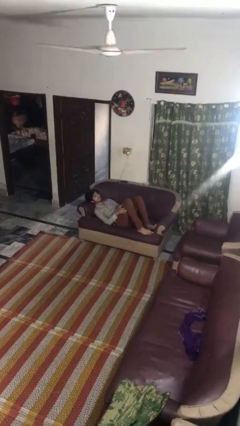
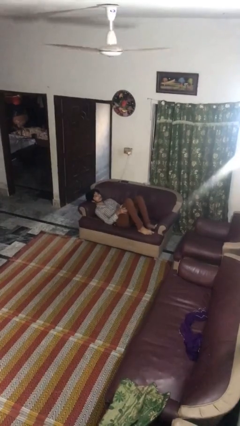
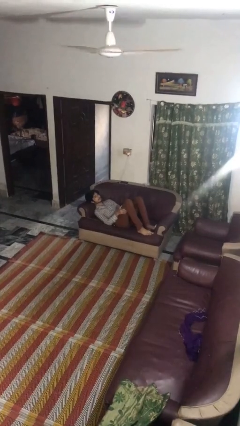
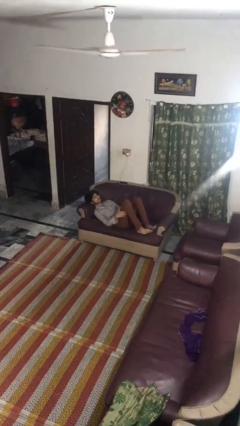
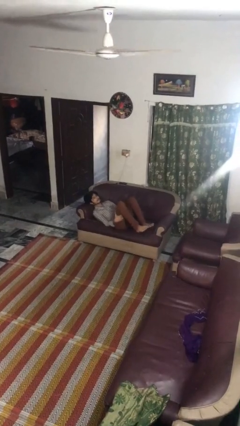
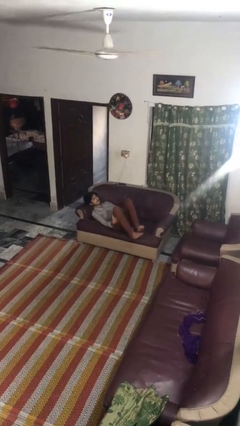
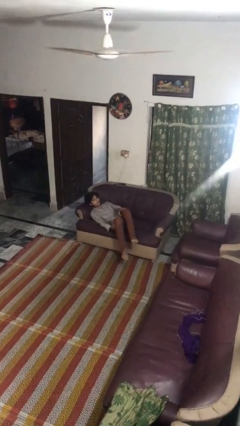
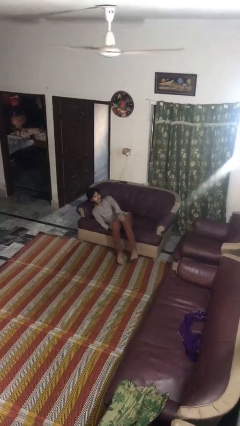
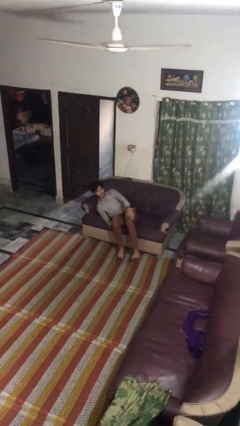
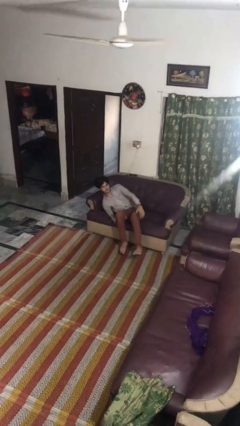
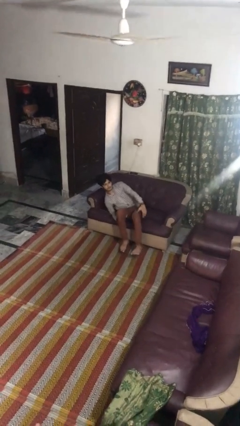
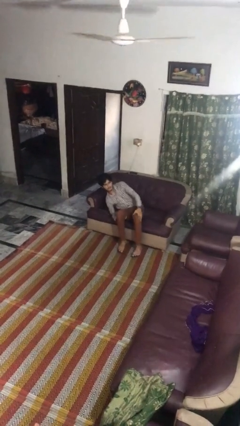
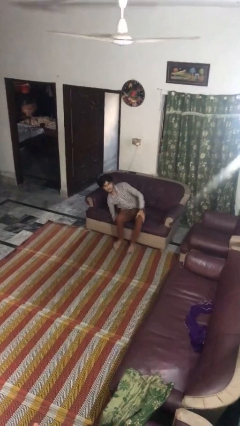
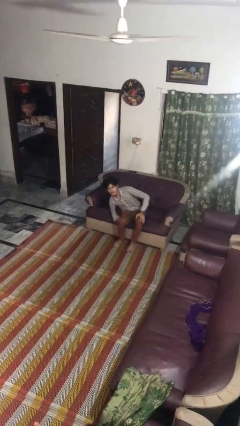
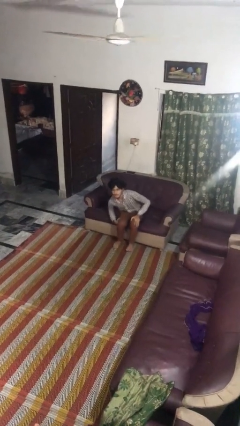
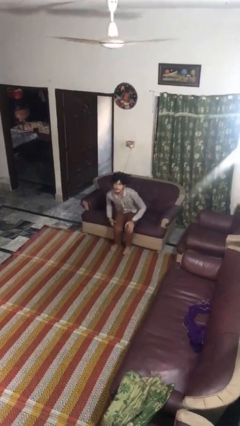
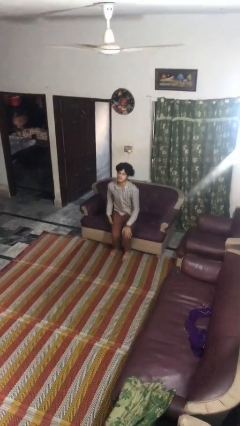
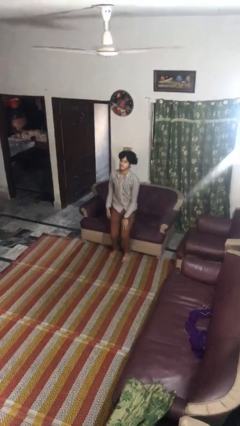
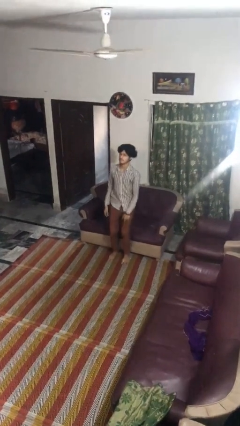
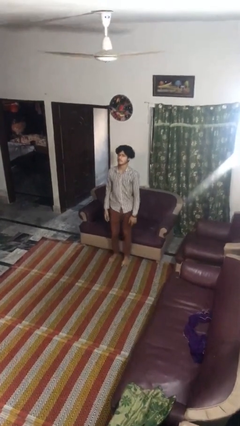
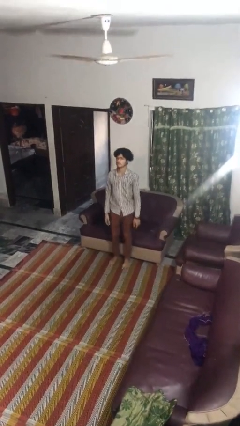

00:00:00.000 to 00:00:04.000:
person stands up

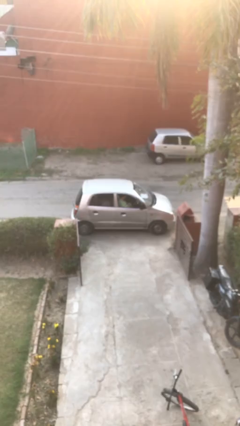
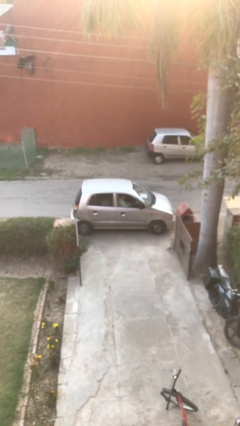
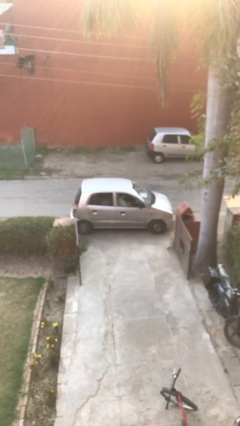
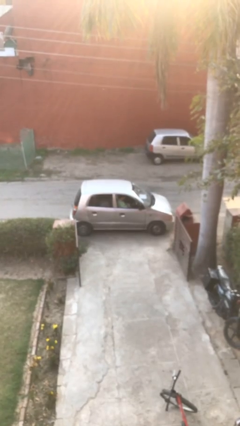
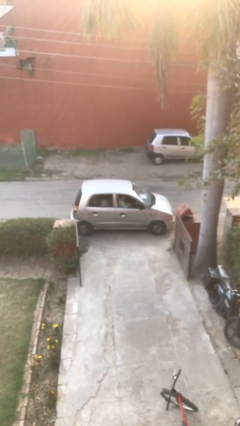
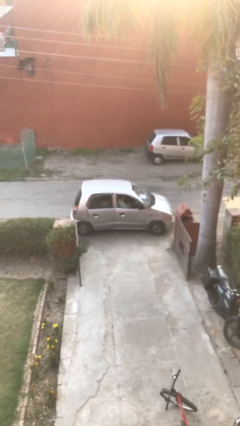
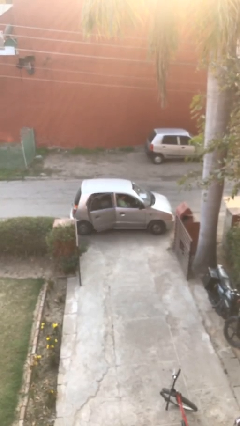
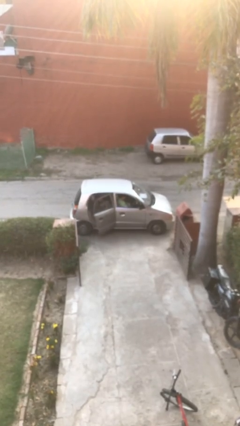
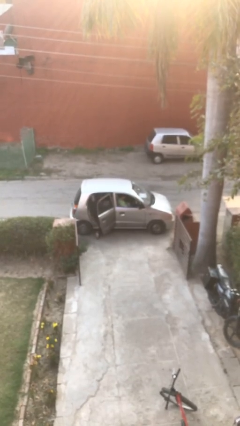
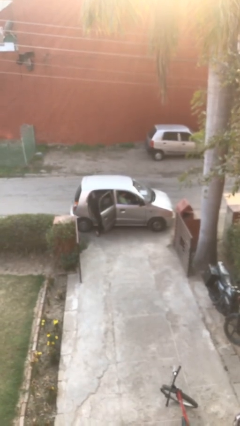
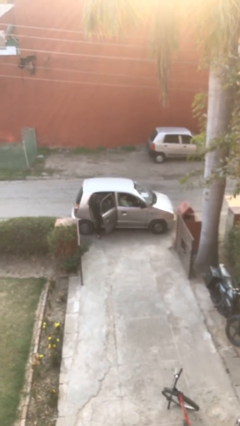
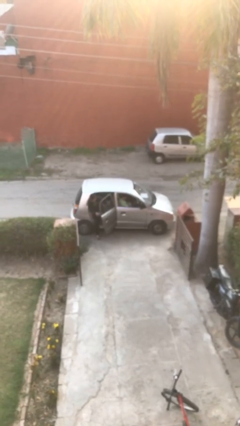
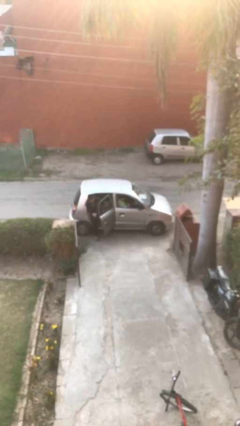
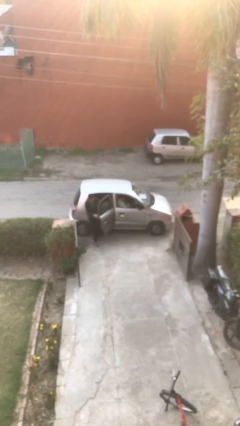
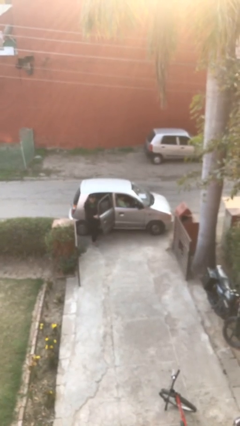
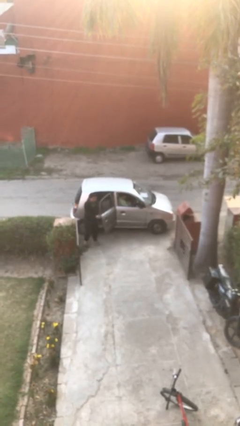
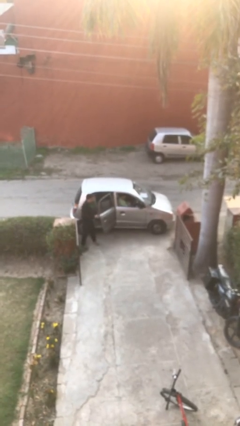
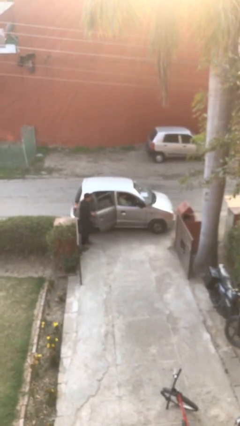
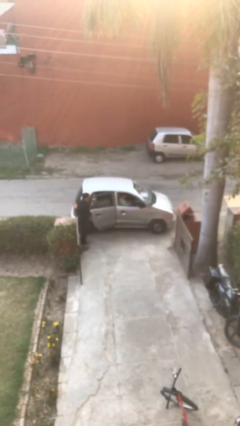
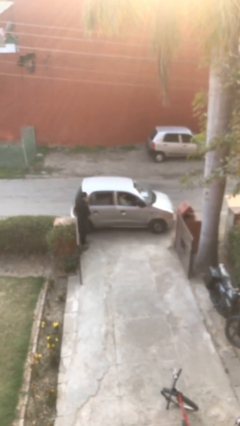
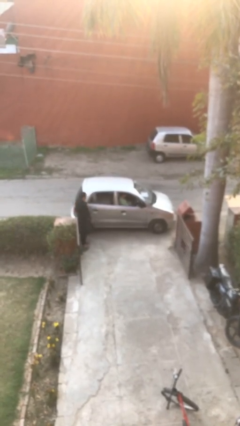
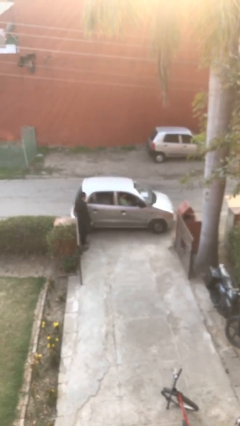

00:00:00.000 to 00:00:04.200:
car drops off person

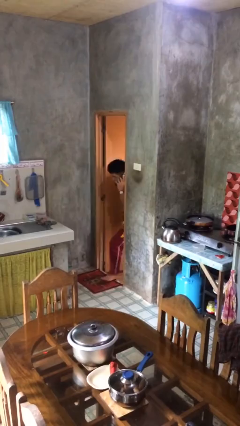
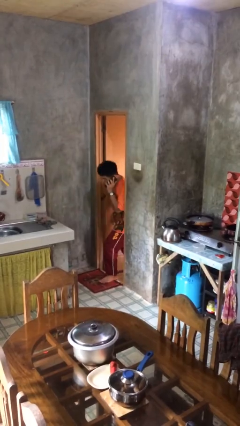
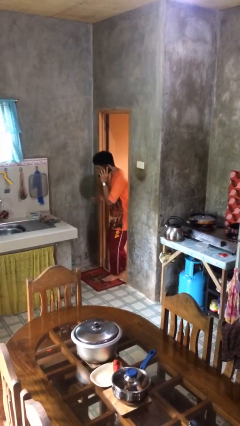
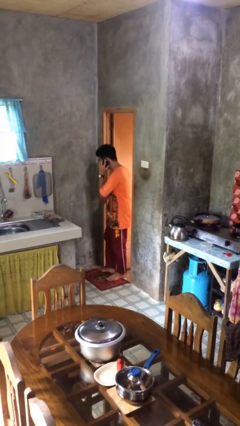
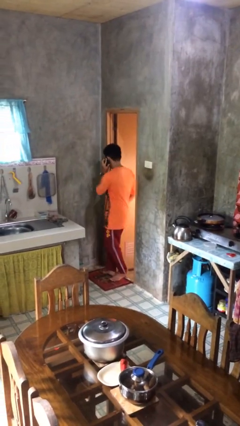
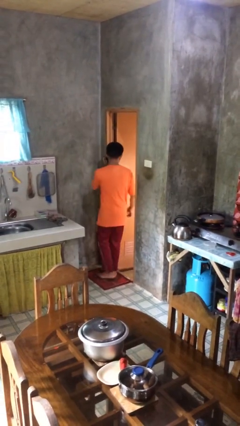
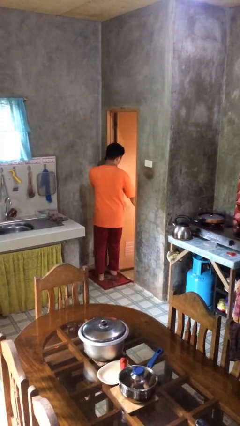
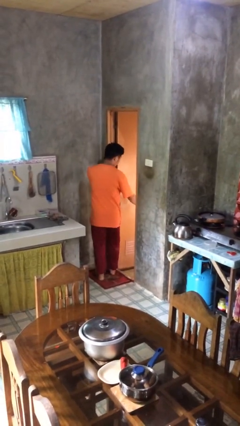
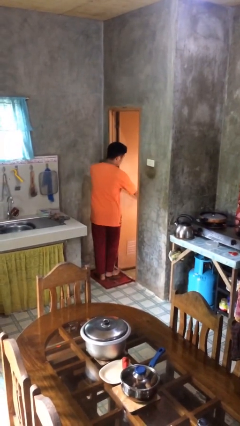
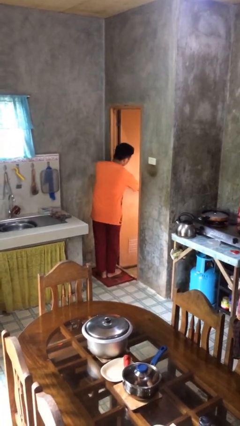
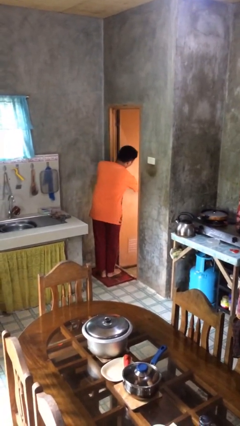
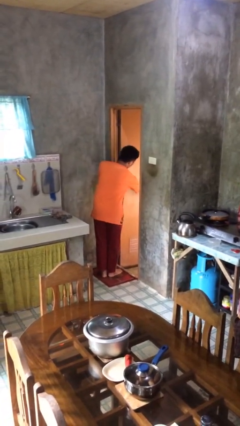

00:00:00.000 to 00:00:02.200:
person enters scene through structure

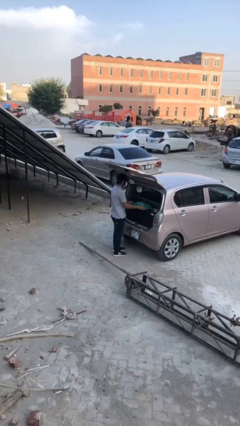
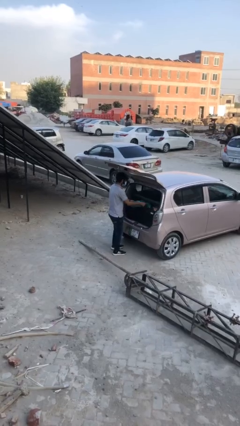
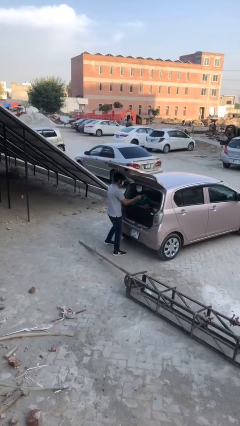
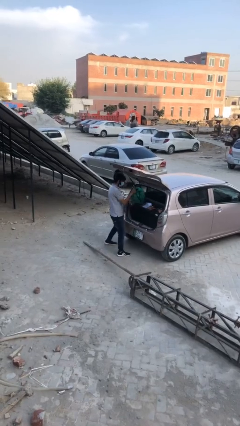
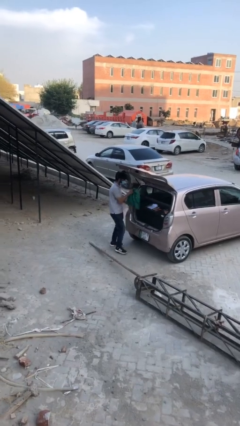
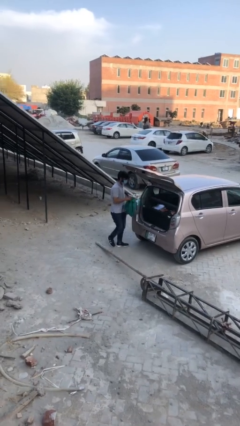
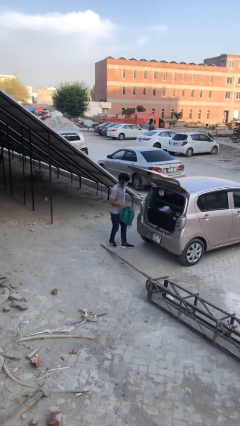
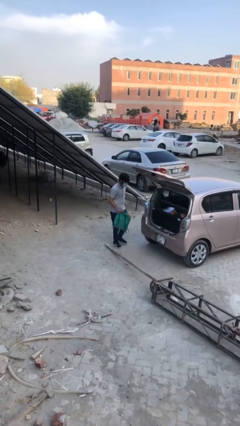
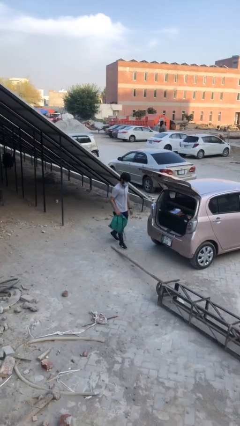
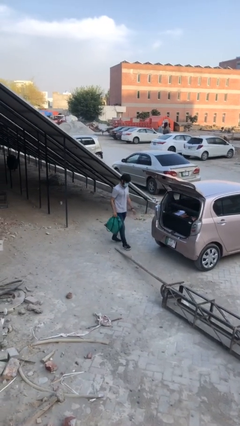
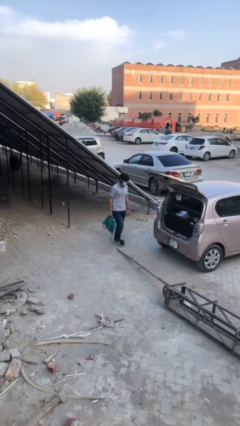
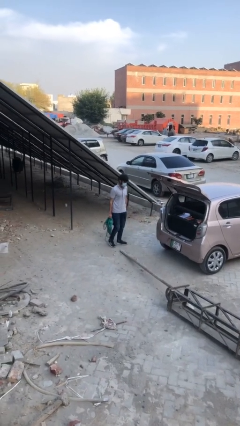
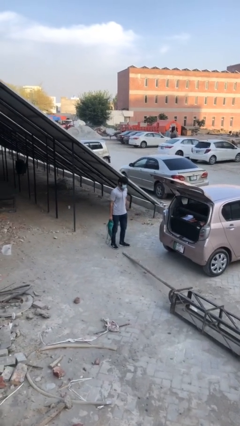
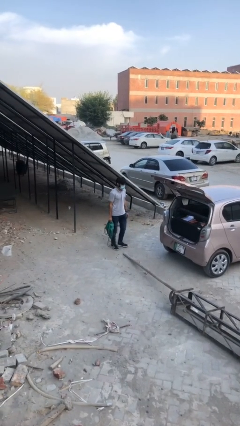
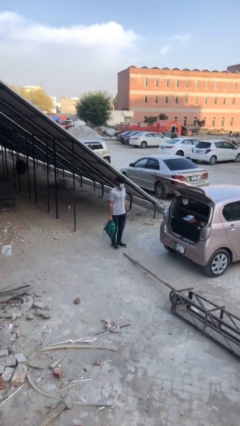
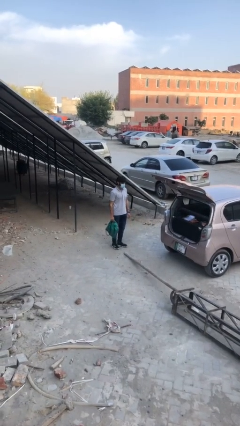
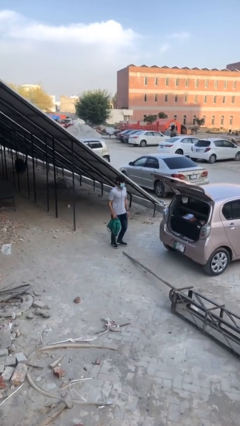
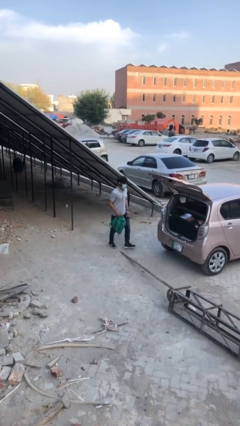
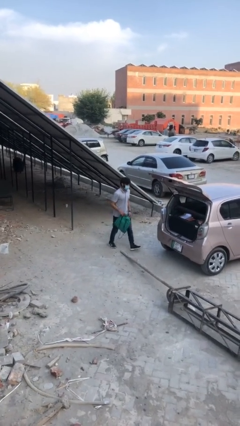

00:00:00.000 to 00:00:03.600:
person unloads car

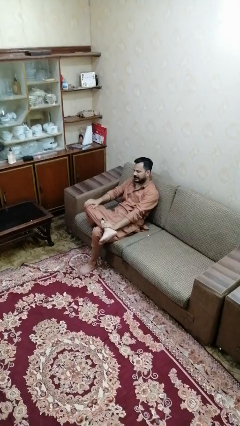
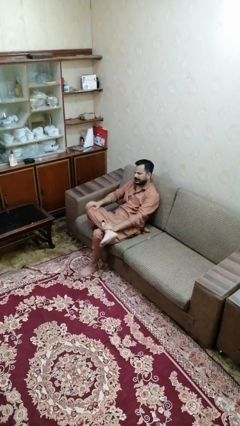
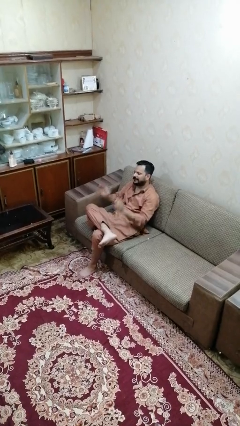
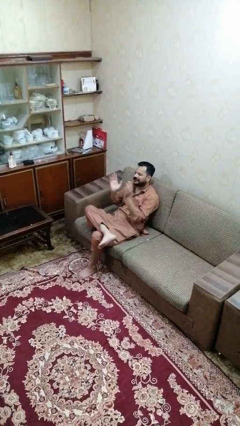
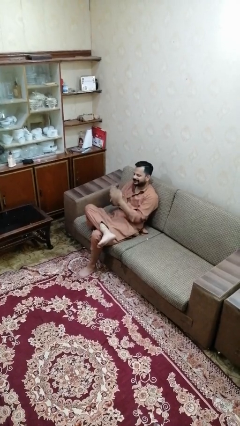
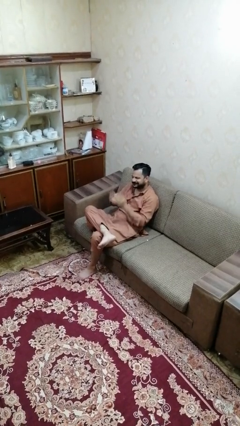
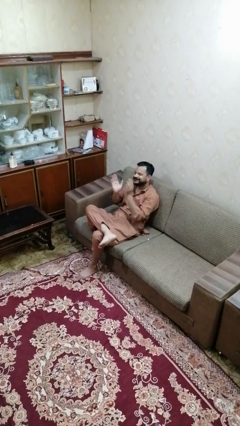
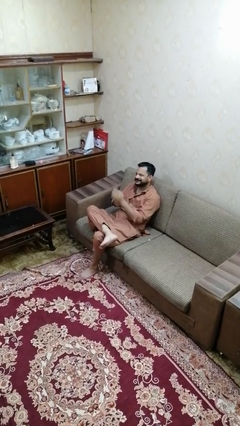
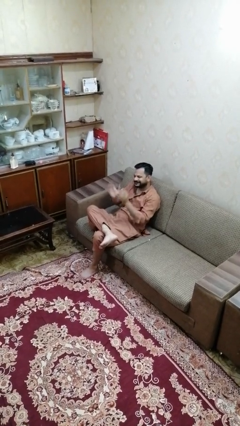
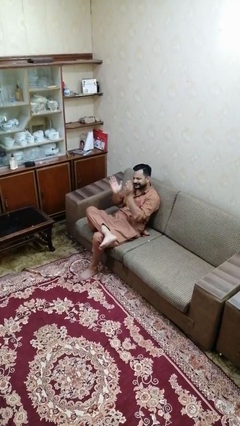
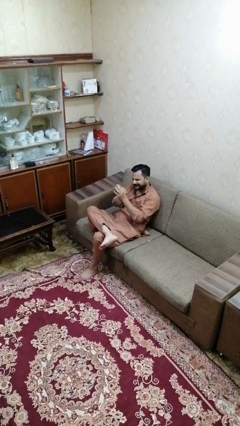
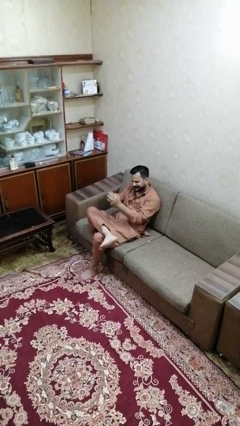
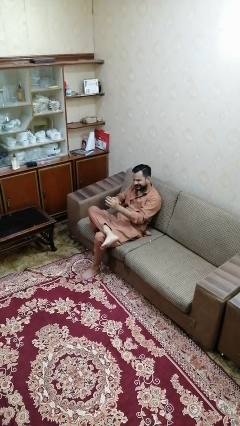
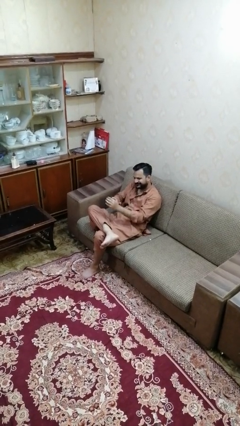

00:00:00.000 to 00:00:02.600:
person claps hands

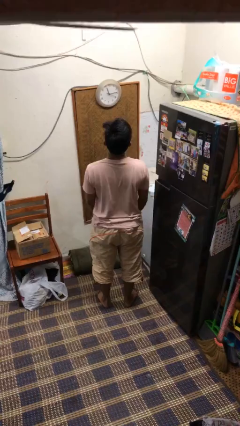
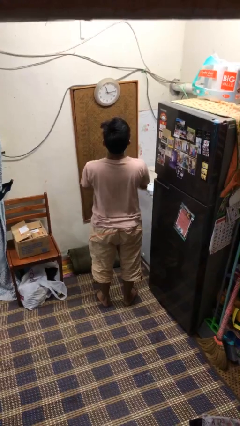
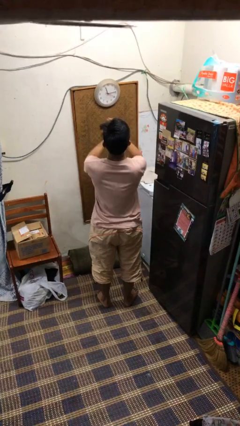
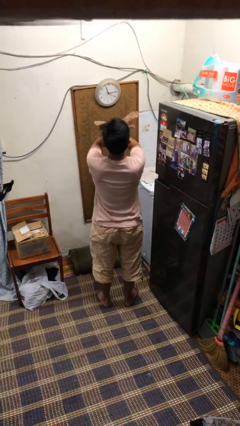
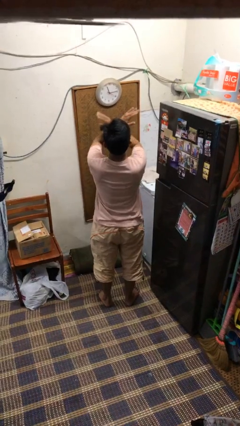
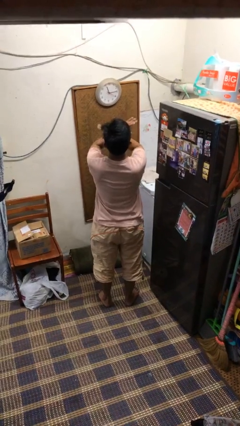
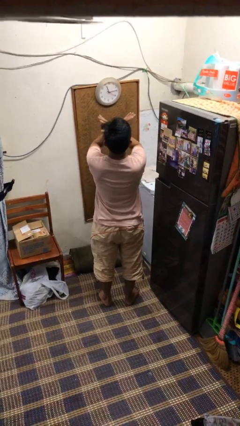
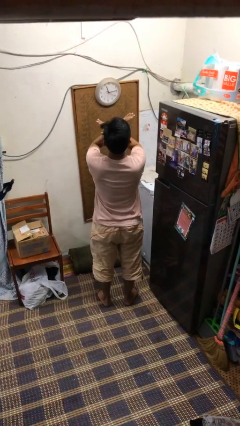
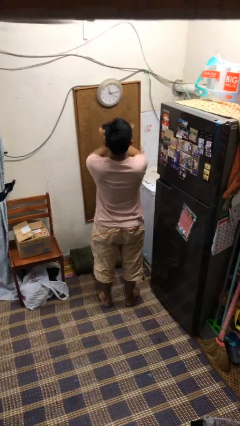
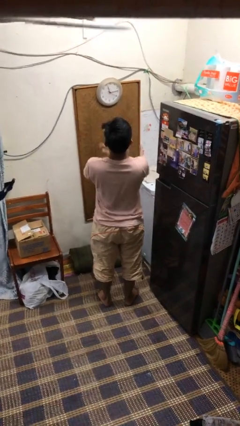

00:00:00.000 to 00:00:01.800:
person gestures arms x
